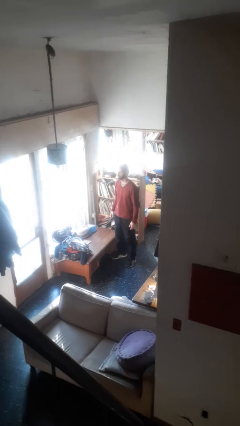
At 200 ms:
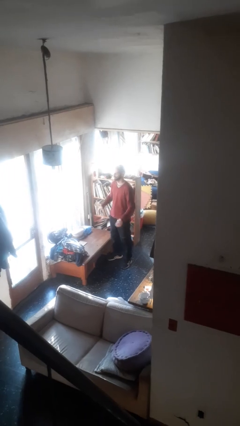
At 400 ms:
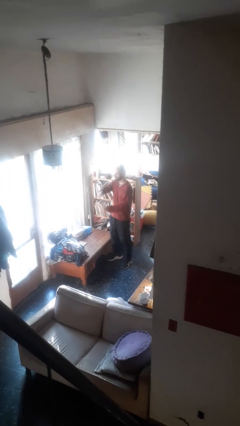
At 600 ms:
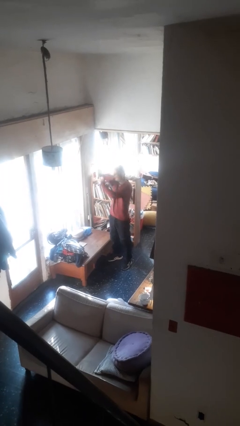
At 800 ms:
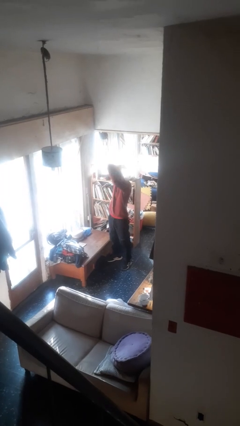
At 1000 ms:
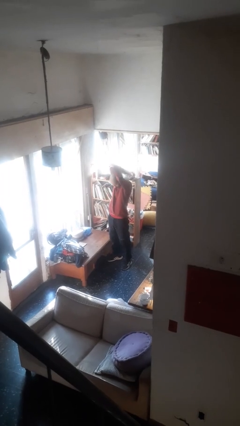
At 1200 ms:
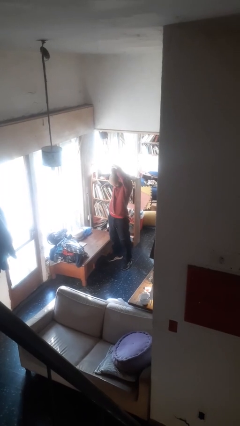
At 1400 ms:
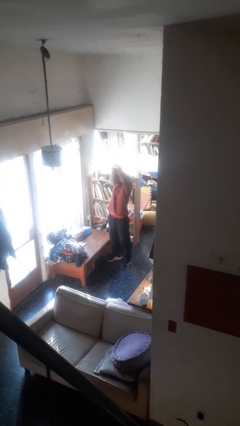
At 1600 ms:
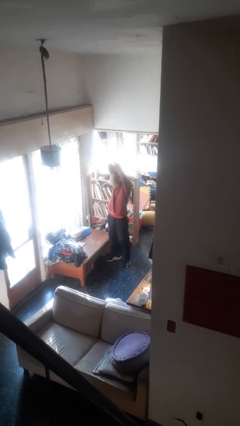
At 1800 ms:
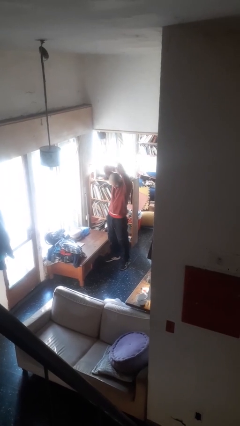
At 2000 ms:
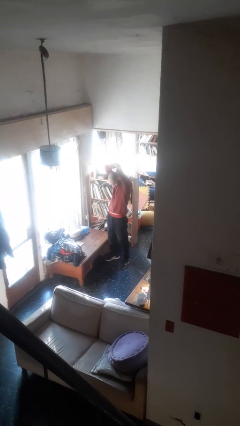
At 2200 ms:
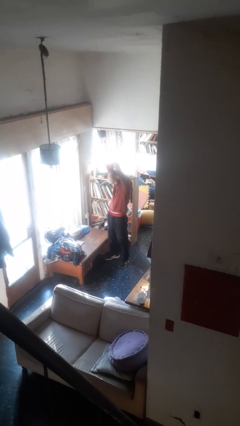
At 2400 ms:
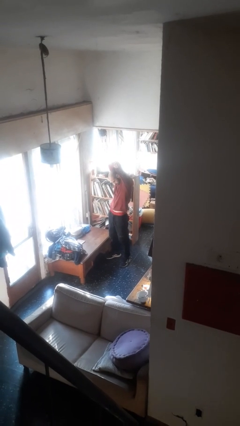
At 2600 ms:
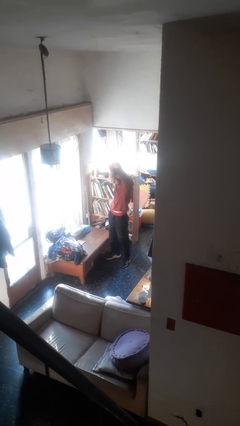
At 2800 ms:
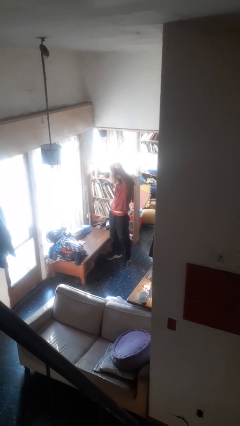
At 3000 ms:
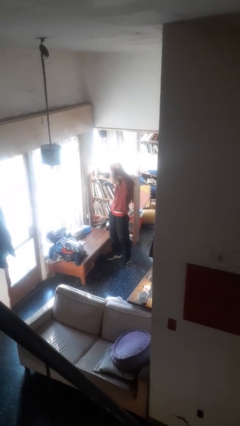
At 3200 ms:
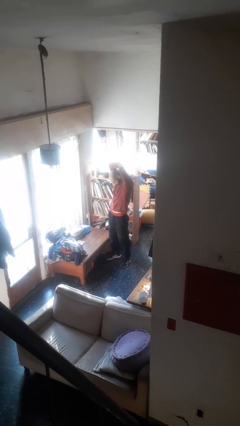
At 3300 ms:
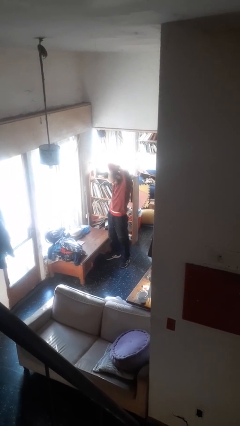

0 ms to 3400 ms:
person stretches arms over head

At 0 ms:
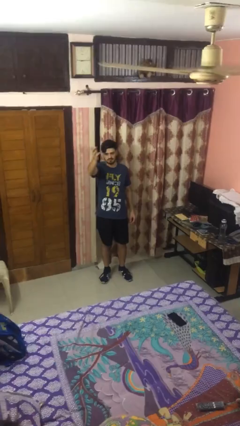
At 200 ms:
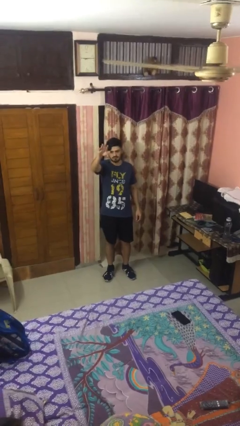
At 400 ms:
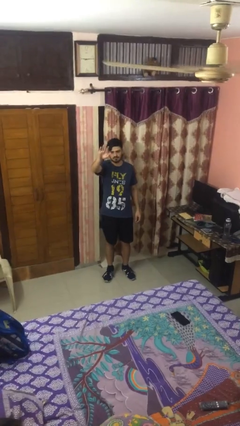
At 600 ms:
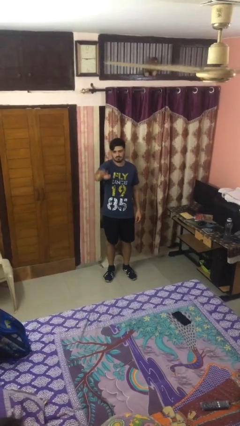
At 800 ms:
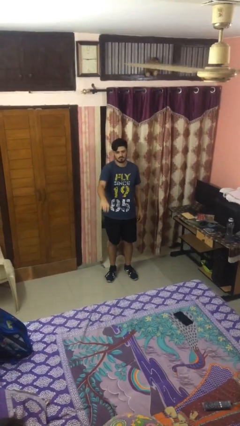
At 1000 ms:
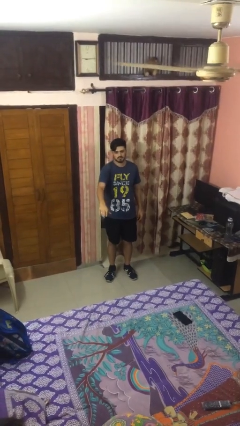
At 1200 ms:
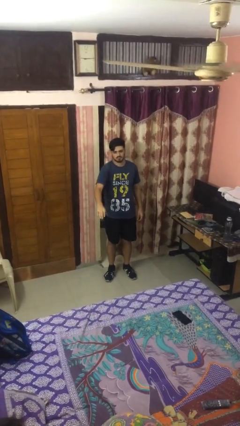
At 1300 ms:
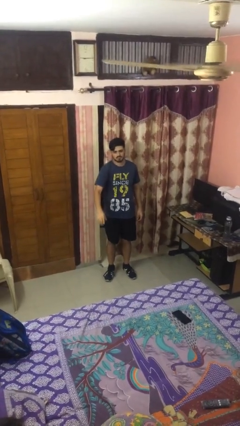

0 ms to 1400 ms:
person gestures swipe down

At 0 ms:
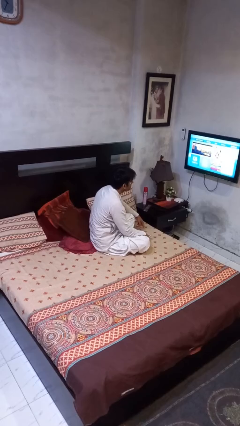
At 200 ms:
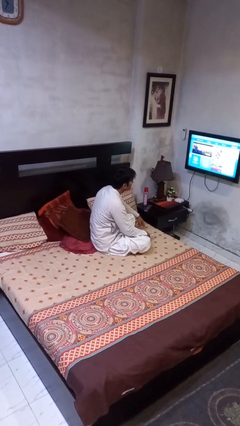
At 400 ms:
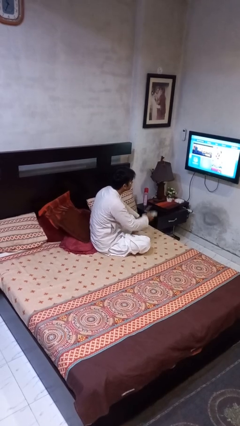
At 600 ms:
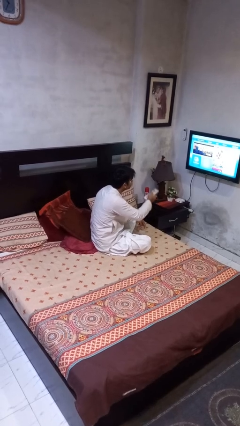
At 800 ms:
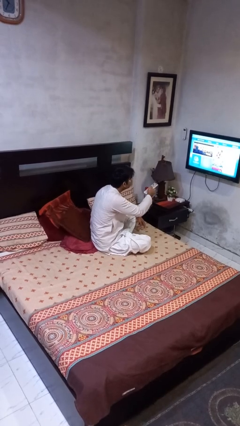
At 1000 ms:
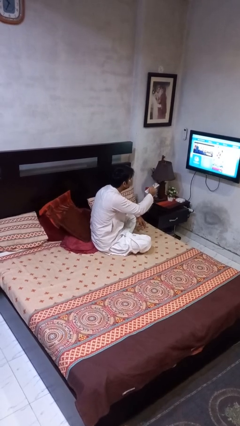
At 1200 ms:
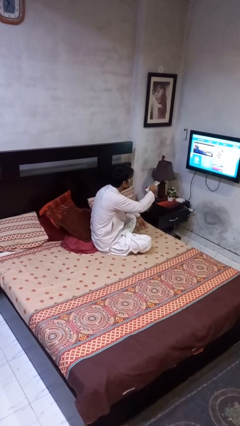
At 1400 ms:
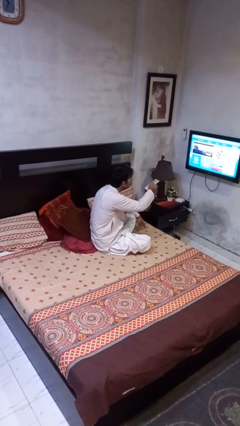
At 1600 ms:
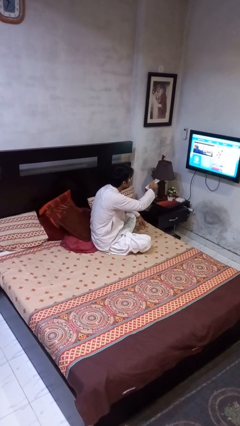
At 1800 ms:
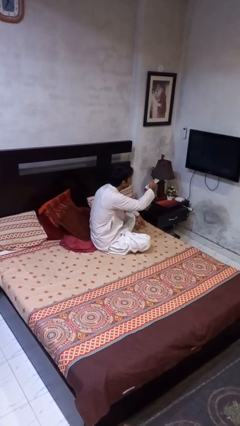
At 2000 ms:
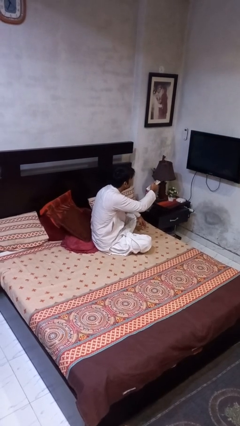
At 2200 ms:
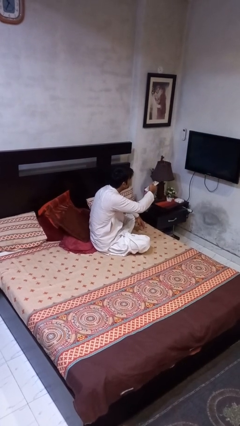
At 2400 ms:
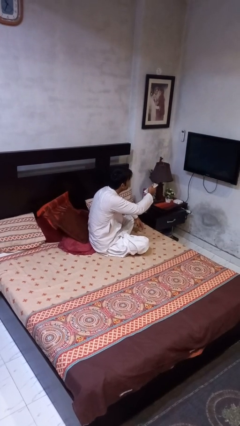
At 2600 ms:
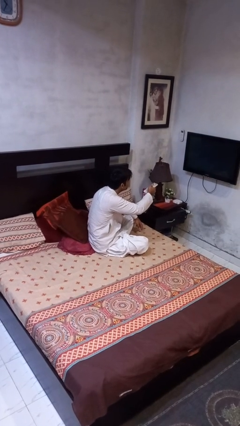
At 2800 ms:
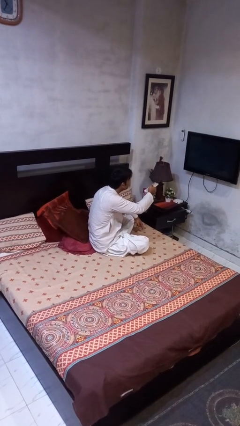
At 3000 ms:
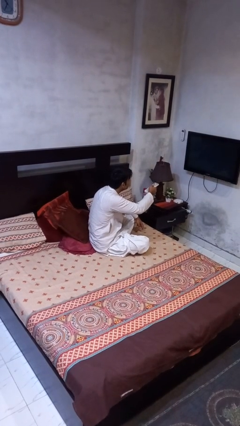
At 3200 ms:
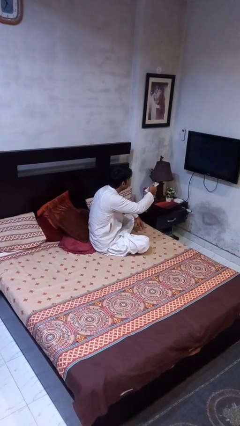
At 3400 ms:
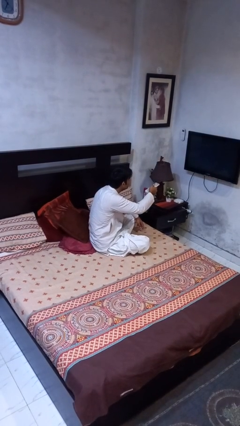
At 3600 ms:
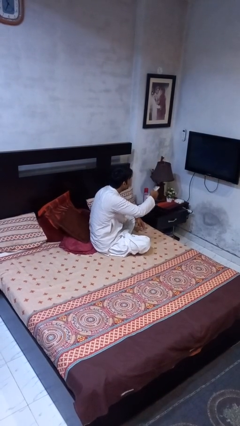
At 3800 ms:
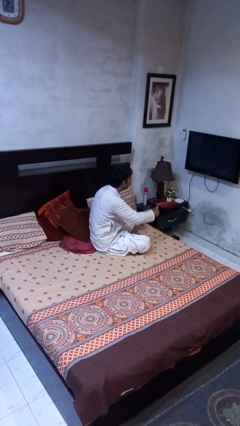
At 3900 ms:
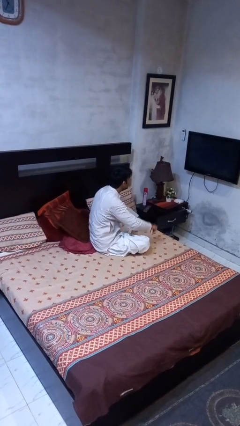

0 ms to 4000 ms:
person uses television remote

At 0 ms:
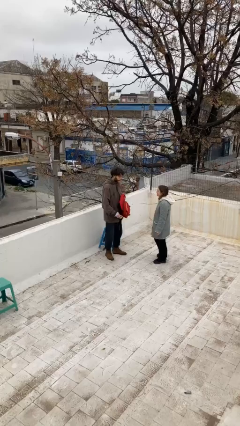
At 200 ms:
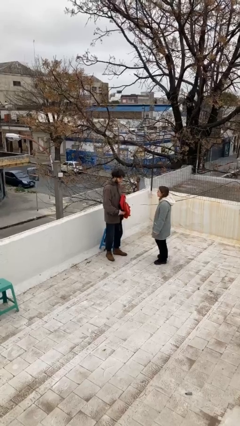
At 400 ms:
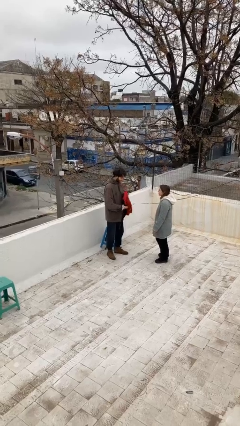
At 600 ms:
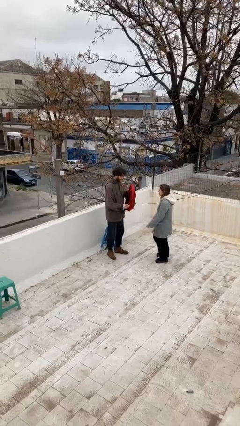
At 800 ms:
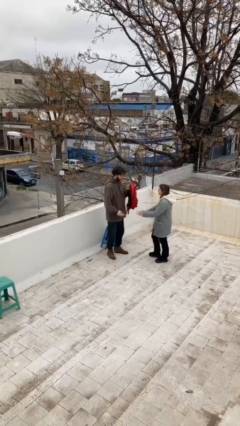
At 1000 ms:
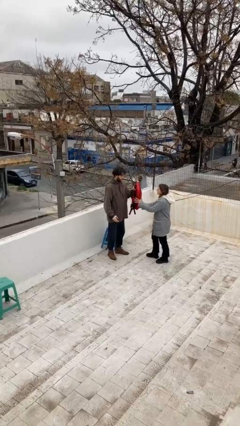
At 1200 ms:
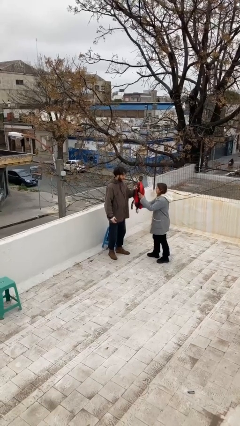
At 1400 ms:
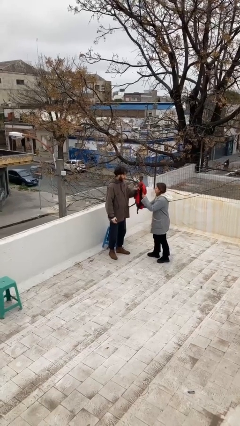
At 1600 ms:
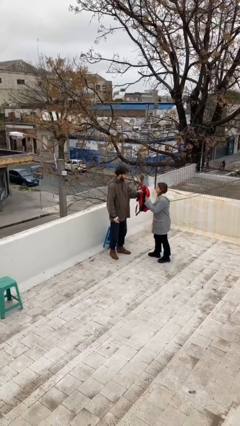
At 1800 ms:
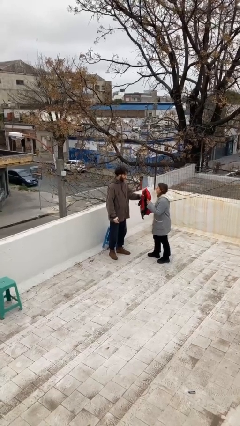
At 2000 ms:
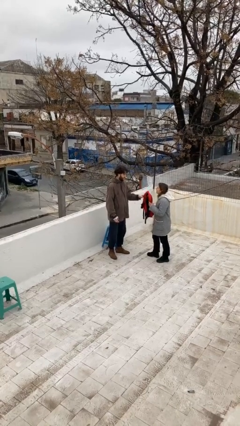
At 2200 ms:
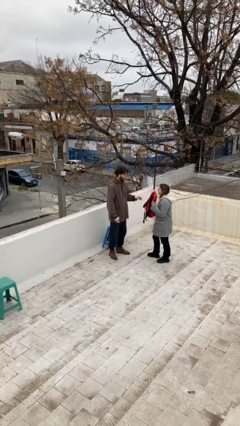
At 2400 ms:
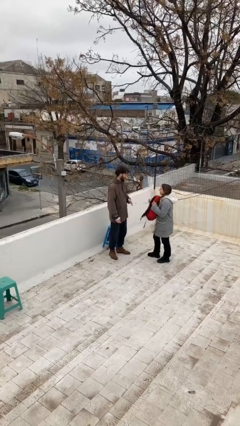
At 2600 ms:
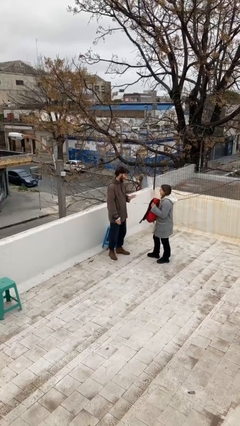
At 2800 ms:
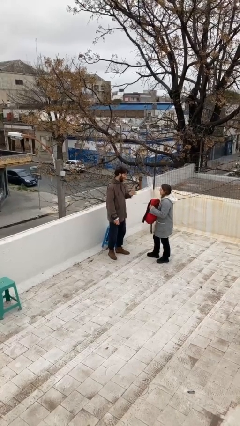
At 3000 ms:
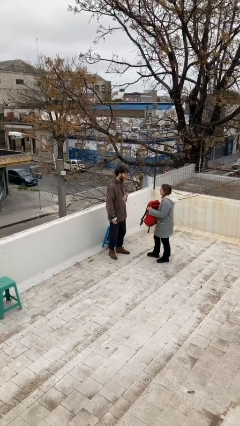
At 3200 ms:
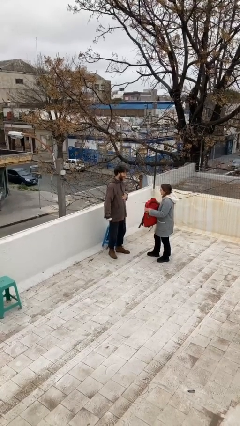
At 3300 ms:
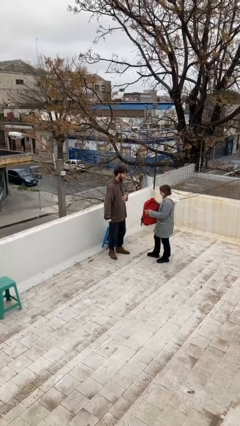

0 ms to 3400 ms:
person transfers object to person

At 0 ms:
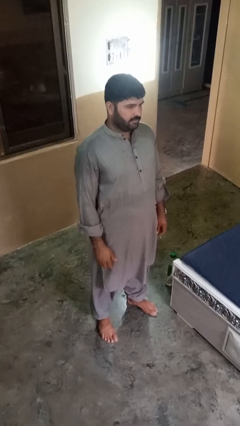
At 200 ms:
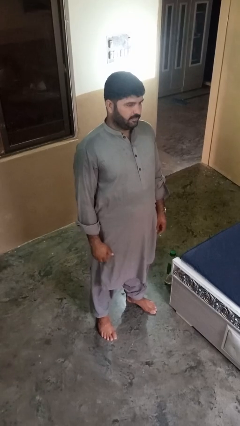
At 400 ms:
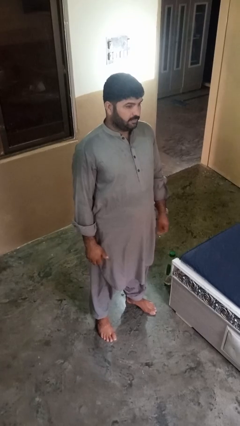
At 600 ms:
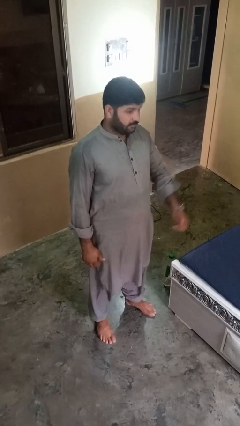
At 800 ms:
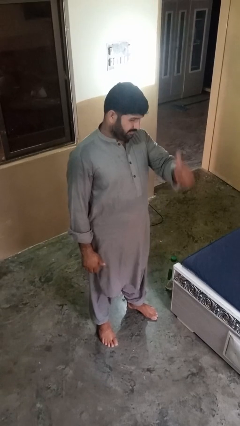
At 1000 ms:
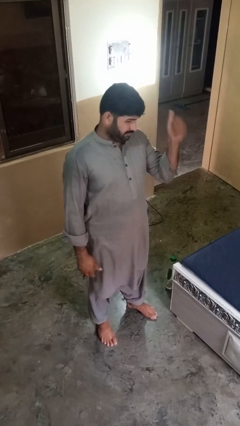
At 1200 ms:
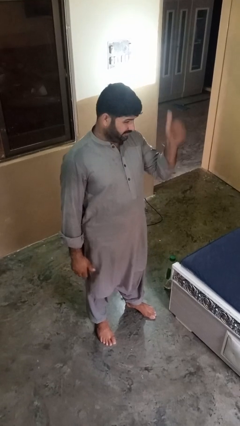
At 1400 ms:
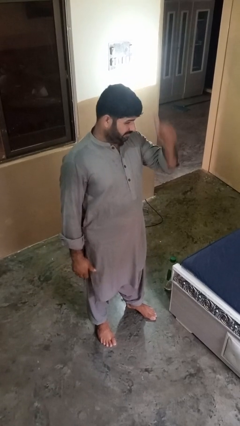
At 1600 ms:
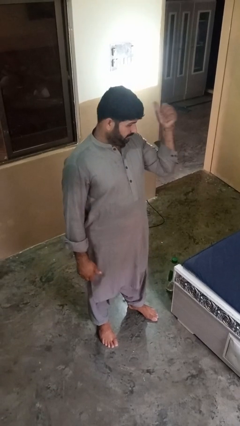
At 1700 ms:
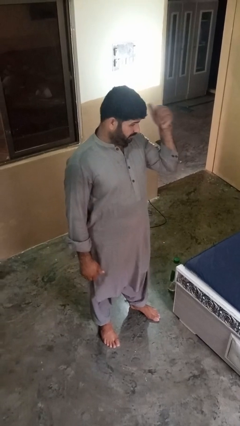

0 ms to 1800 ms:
person gestures behind me

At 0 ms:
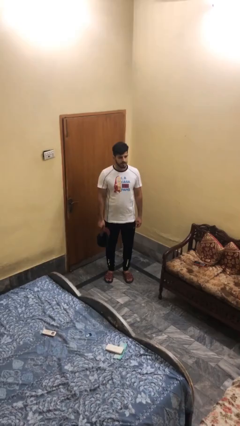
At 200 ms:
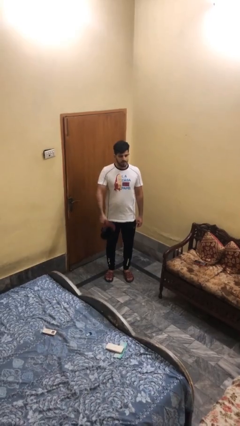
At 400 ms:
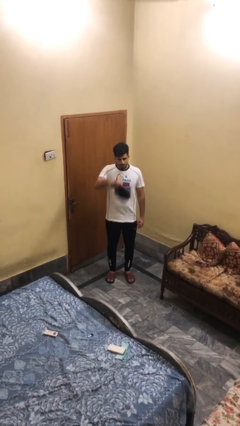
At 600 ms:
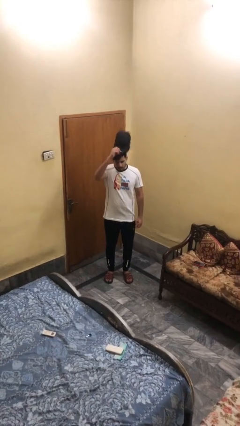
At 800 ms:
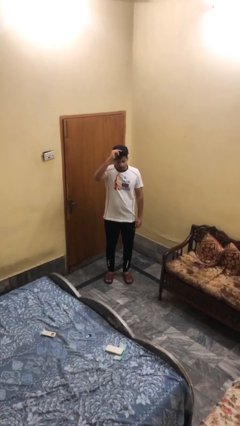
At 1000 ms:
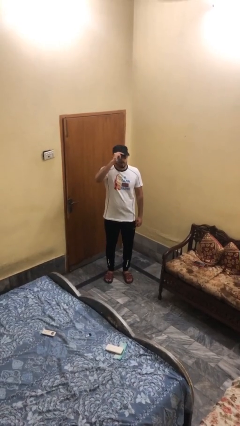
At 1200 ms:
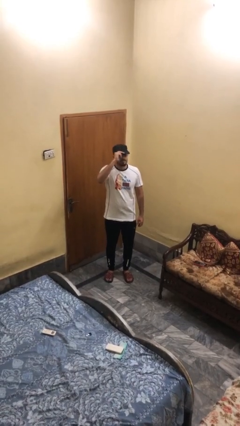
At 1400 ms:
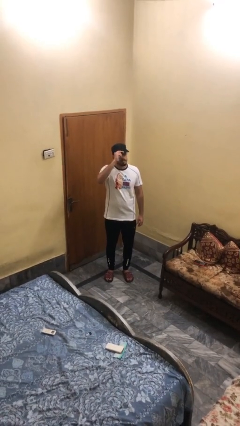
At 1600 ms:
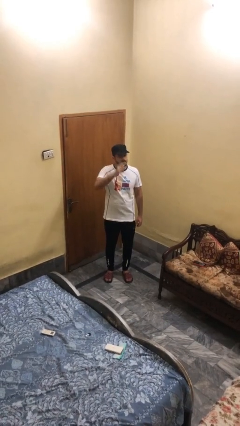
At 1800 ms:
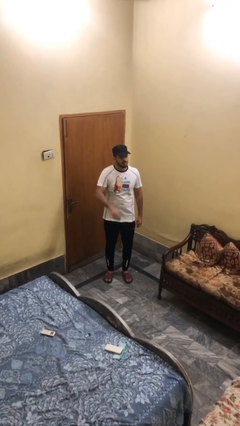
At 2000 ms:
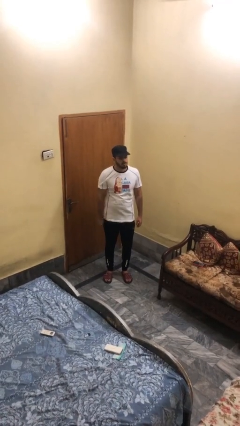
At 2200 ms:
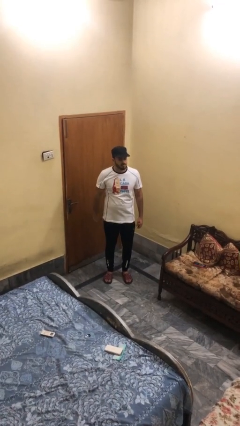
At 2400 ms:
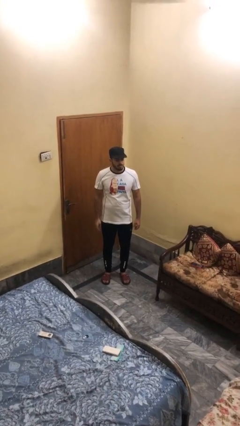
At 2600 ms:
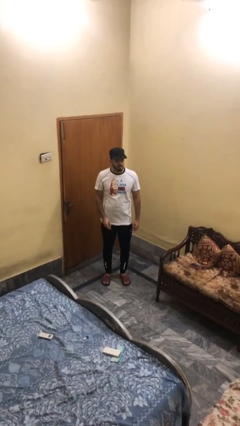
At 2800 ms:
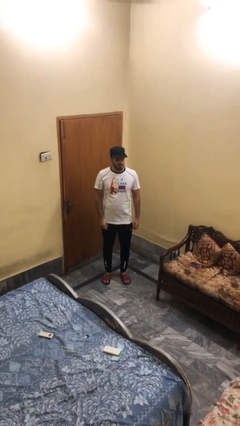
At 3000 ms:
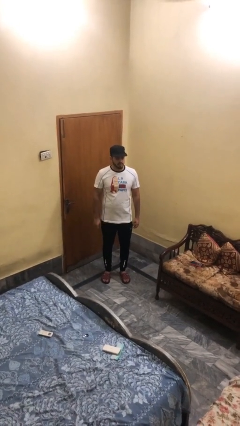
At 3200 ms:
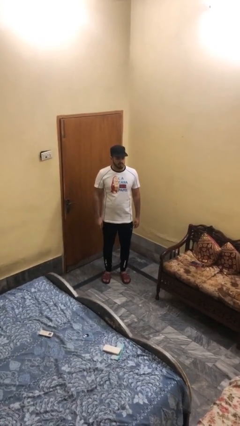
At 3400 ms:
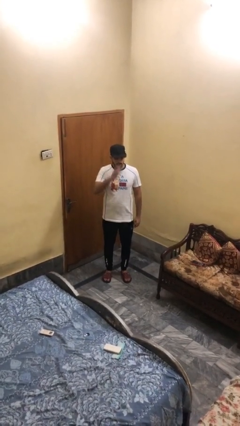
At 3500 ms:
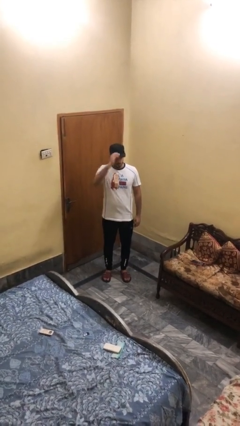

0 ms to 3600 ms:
person puts on hat
